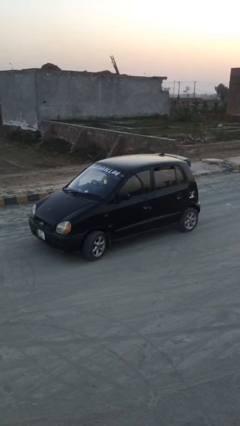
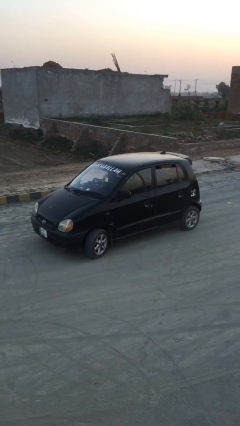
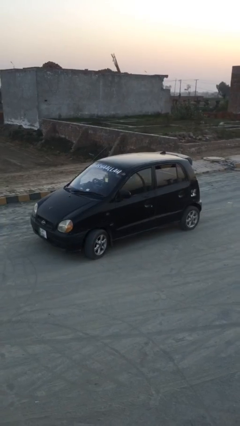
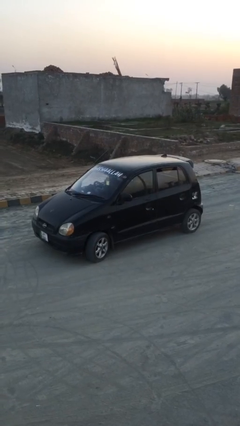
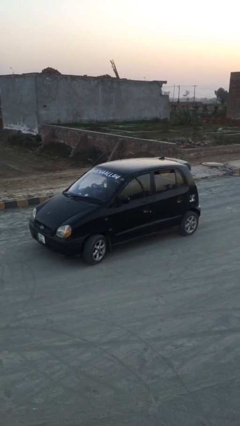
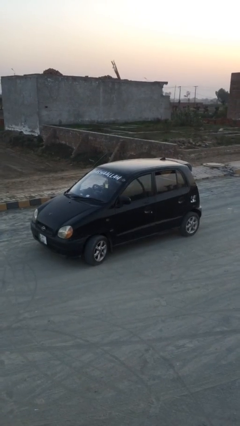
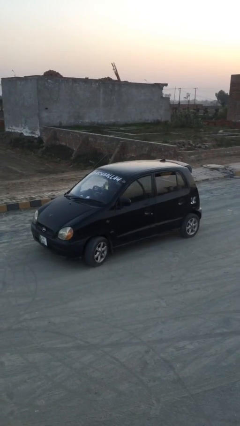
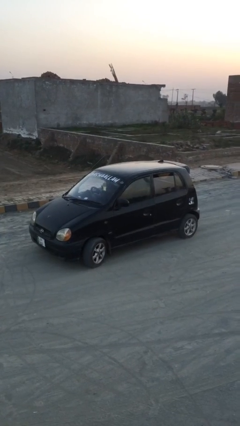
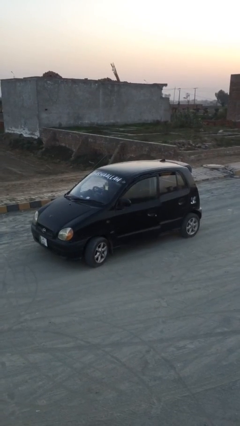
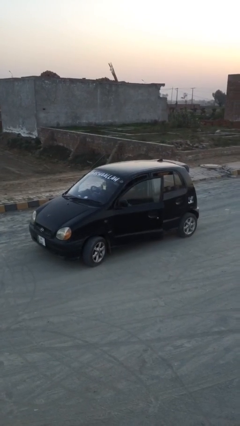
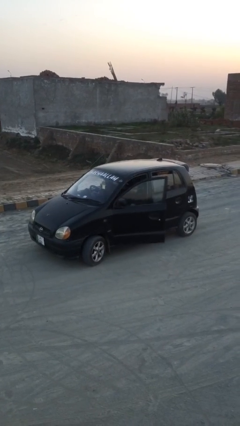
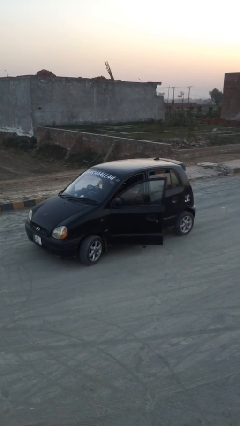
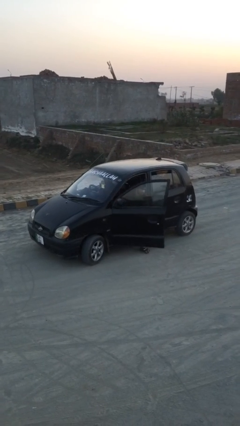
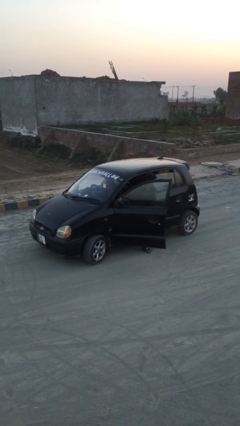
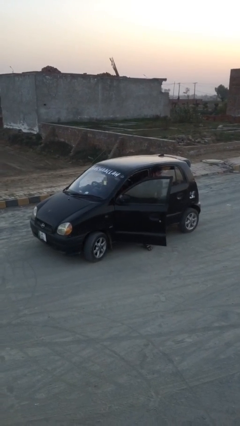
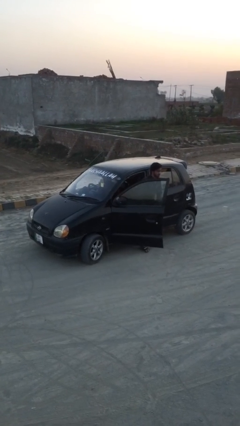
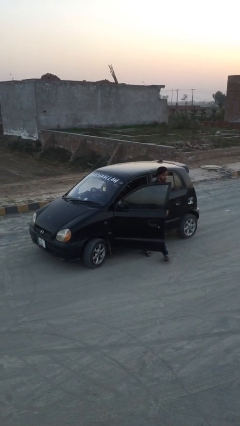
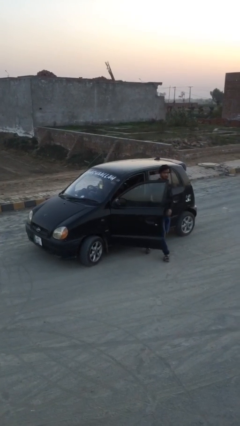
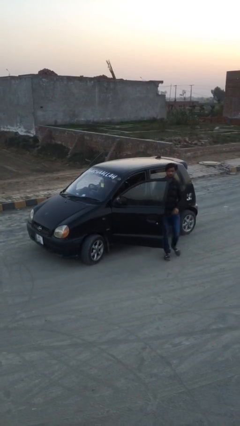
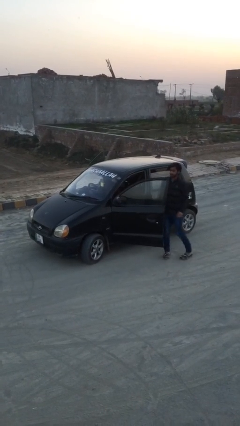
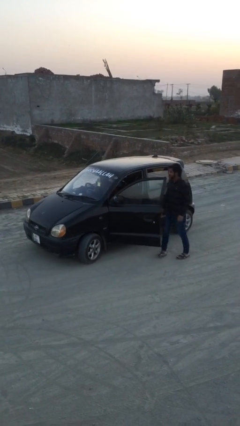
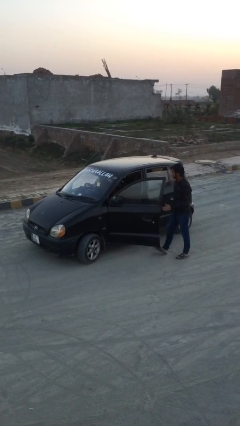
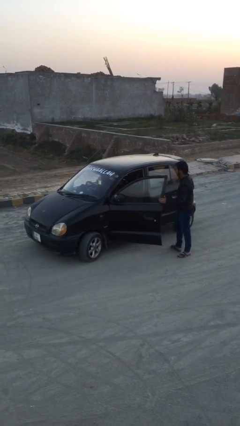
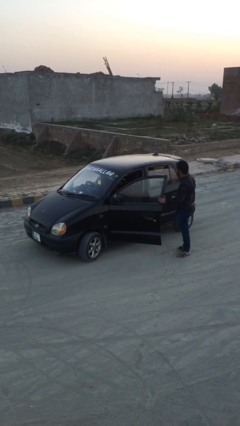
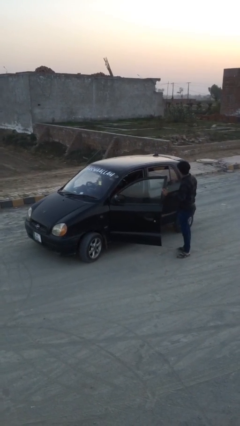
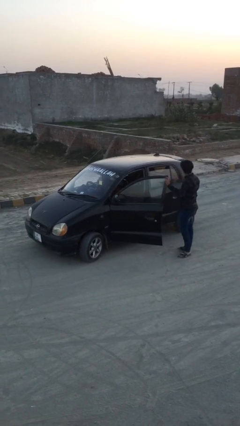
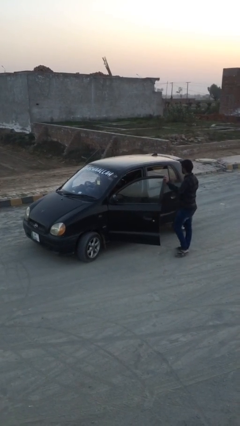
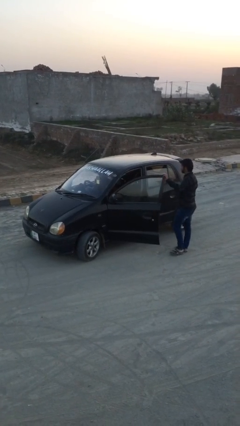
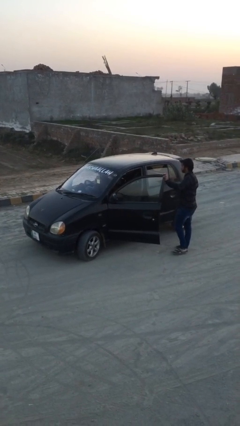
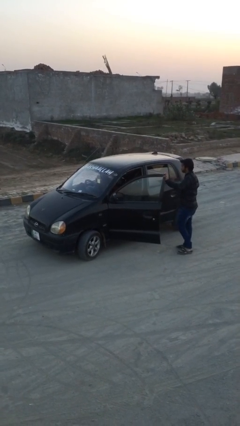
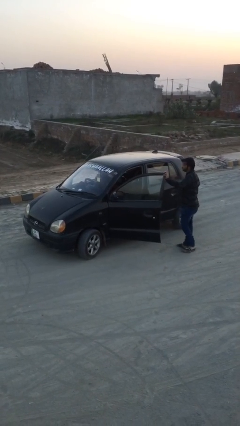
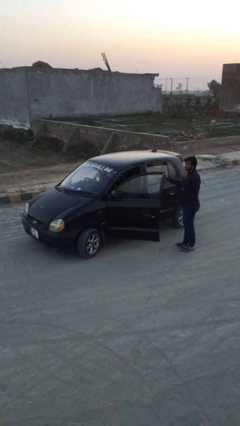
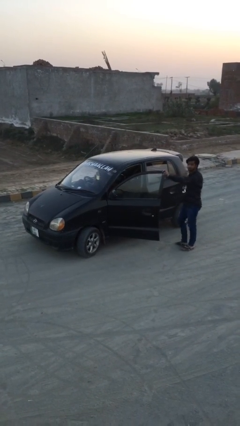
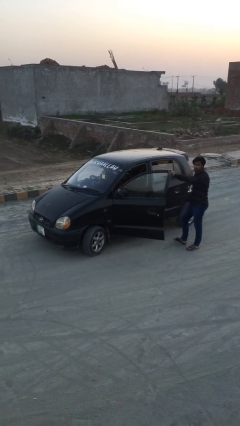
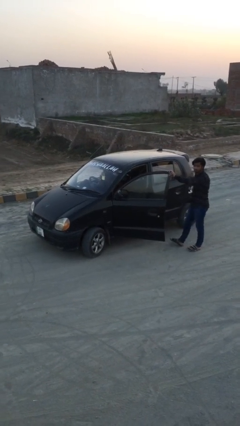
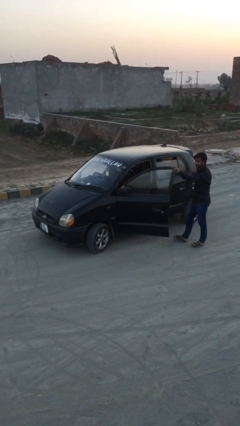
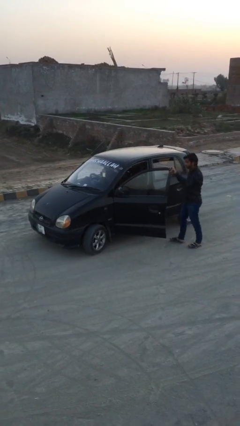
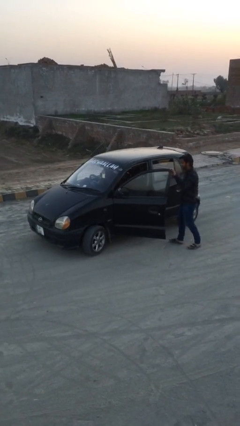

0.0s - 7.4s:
car drops off person

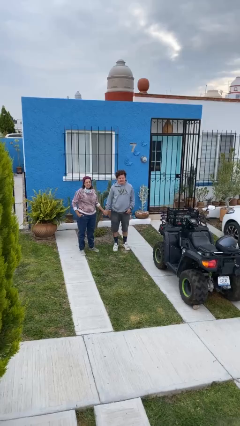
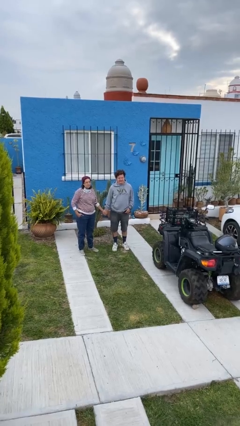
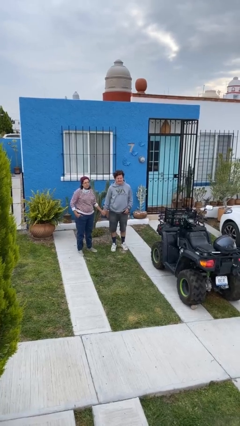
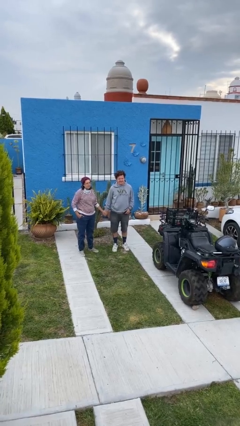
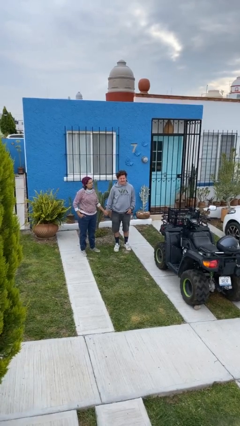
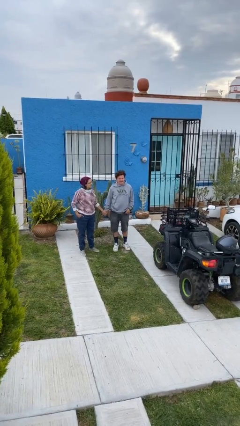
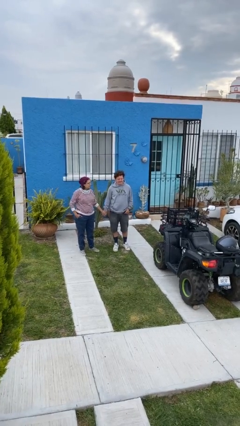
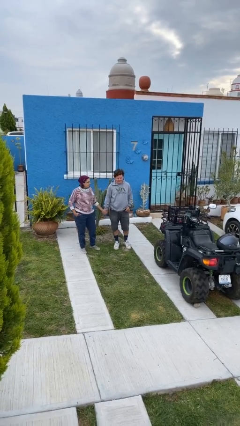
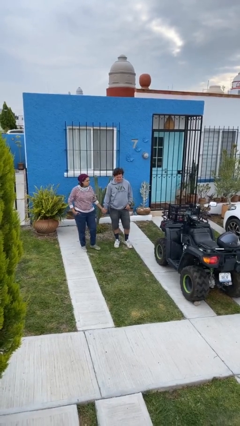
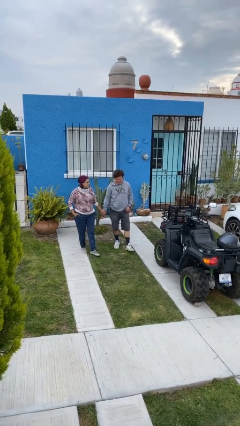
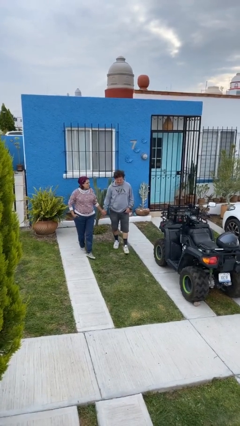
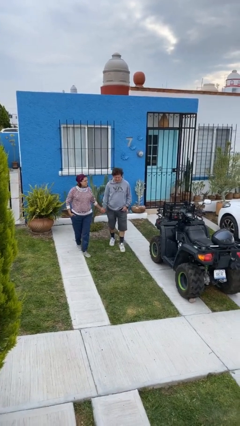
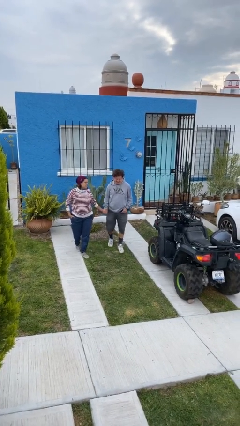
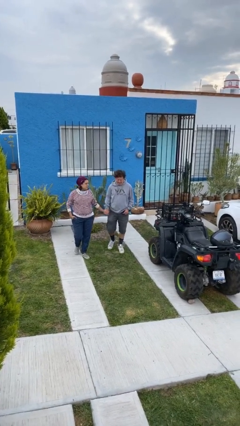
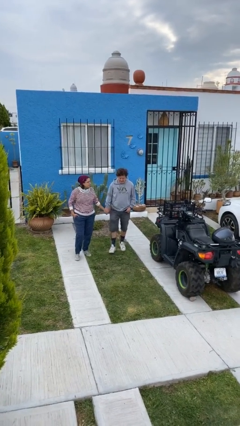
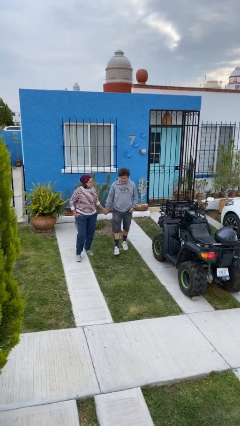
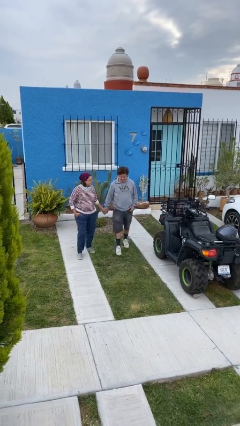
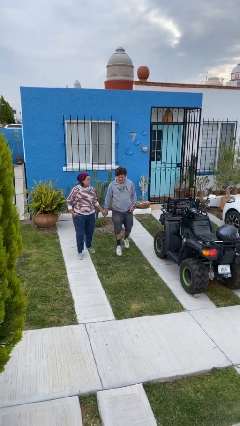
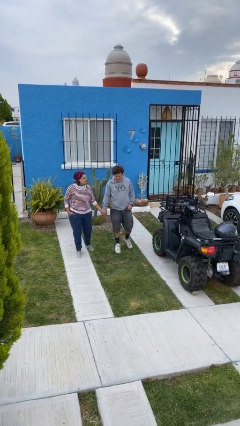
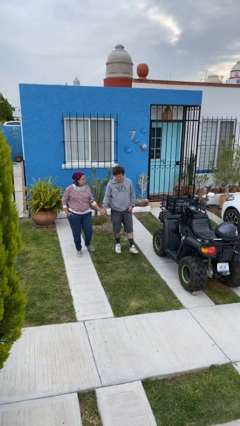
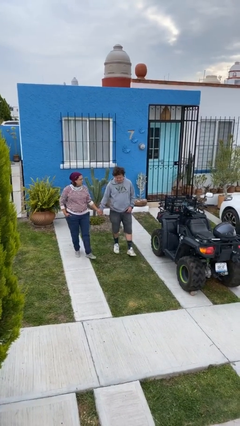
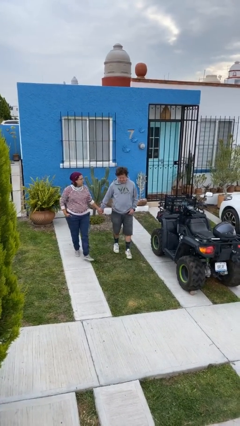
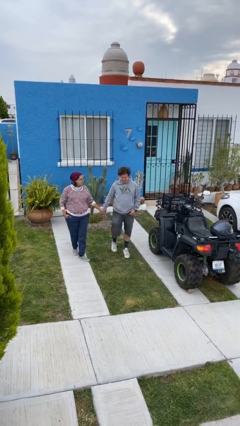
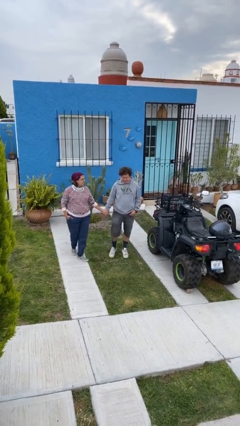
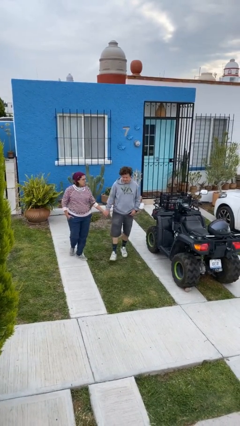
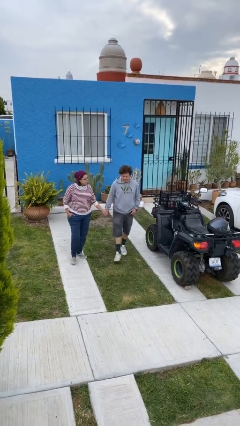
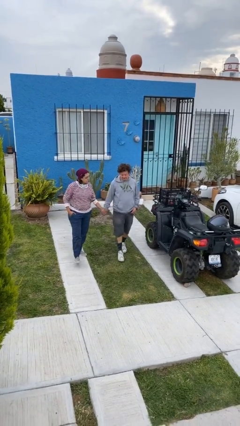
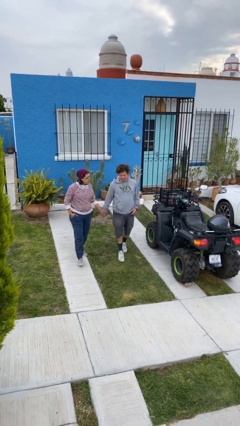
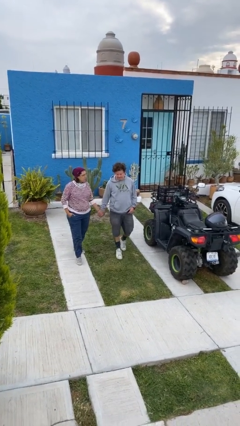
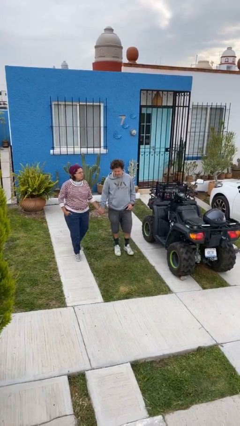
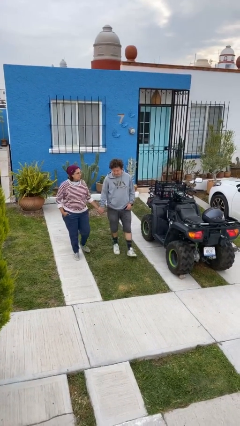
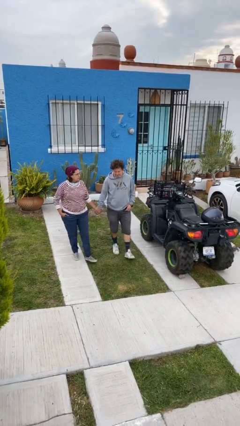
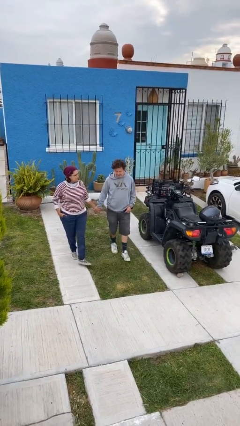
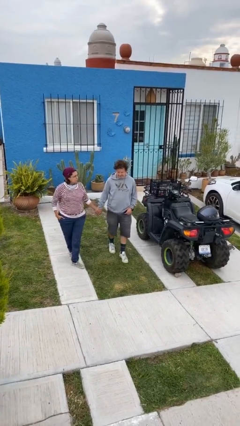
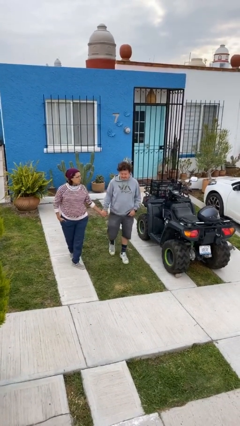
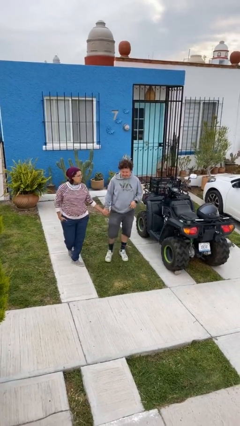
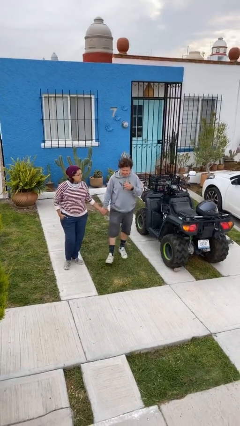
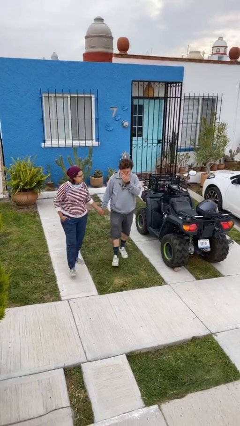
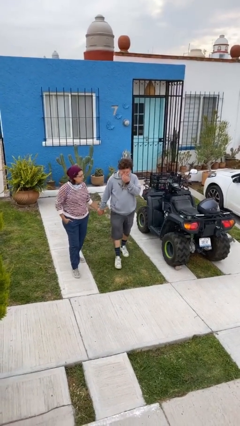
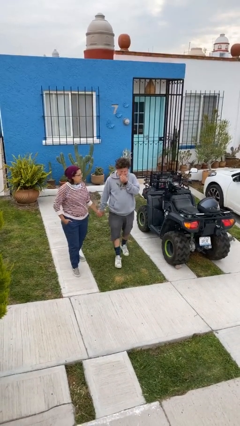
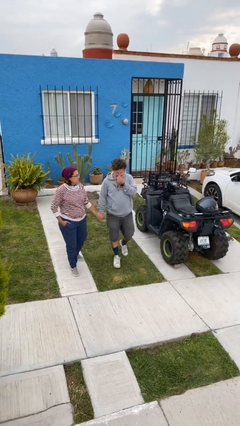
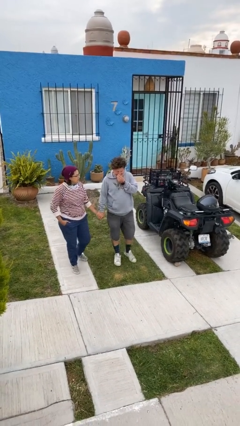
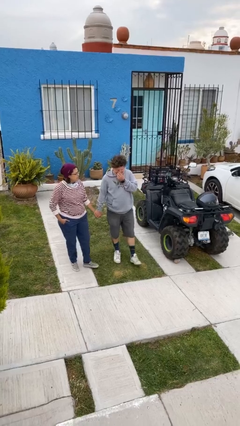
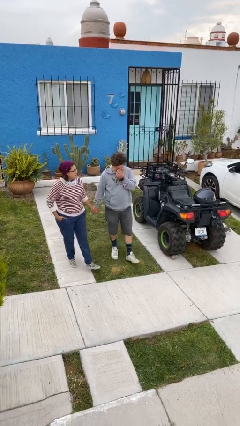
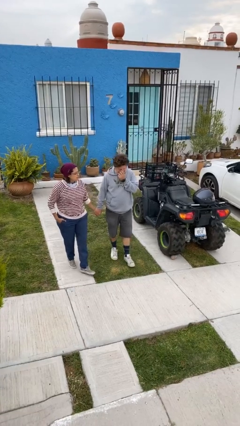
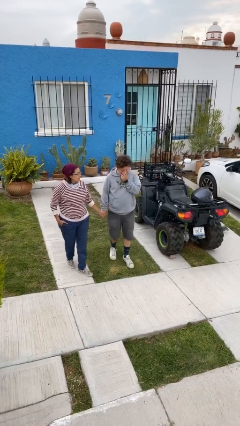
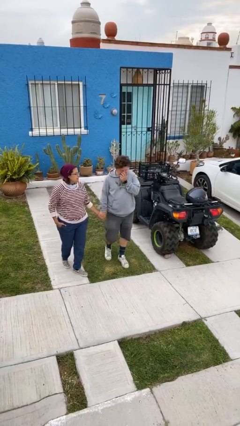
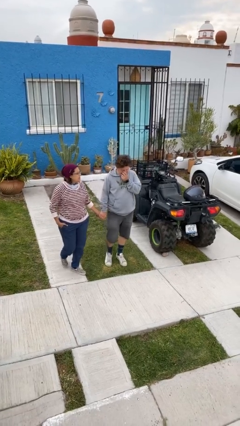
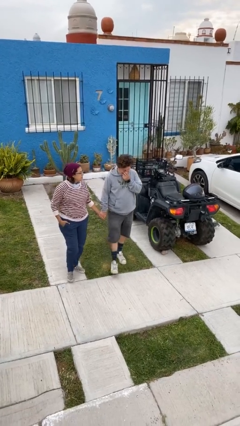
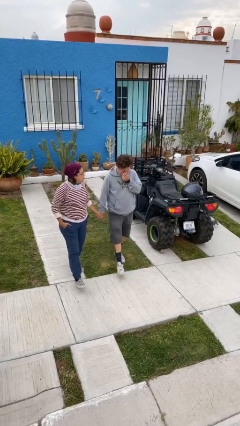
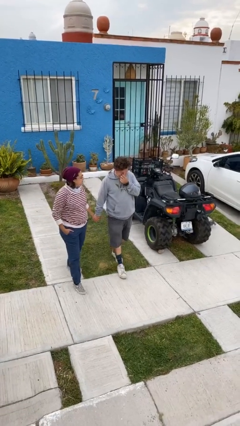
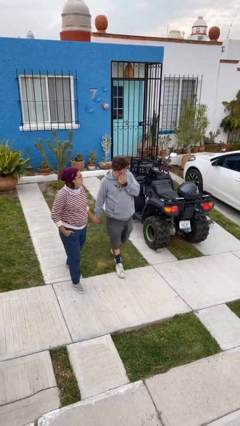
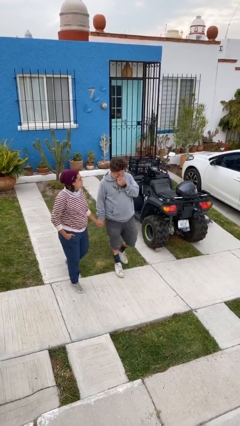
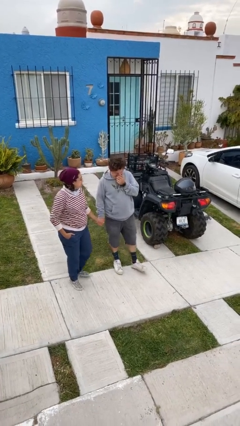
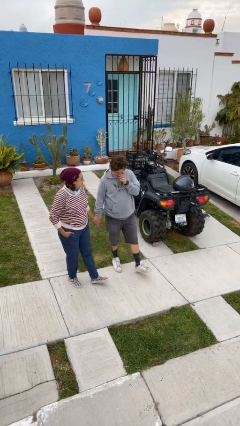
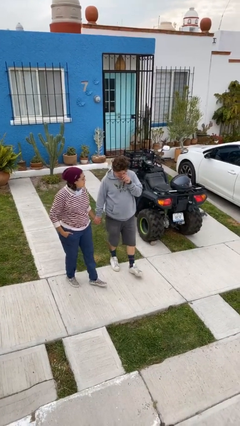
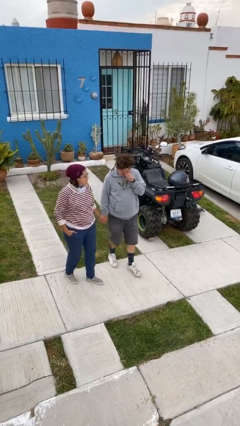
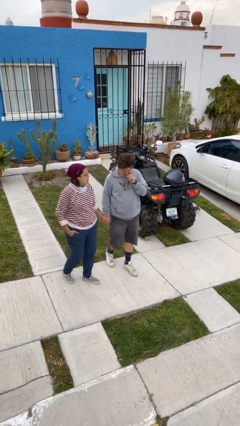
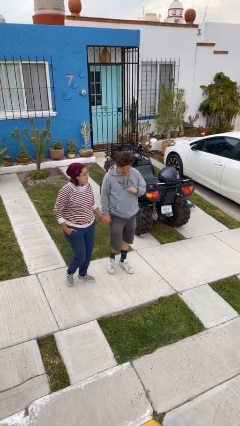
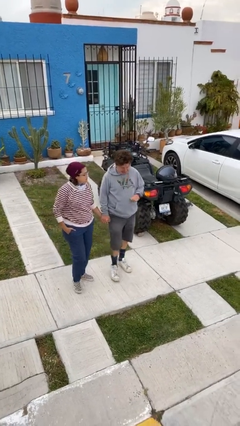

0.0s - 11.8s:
person holds hand
